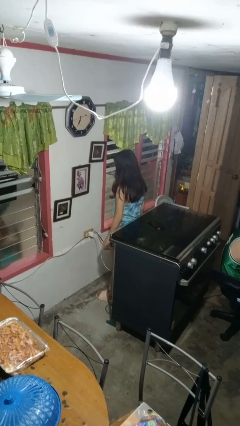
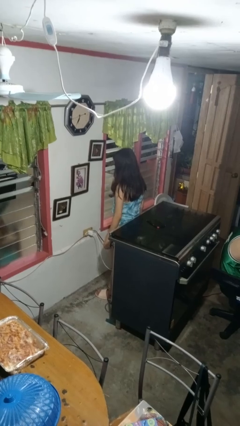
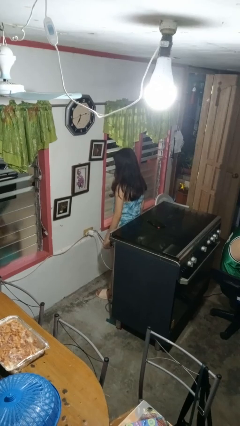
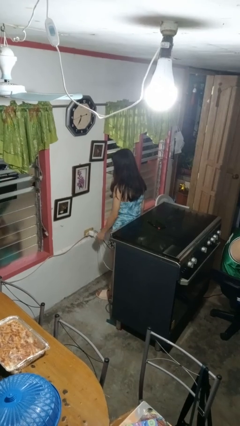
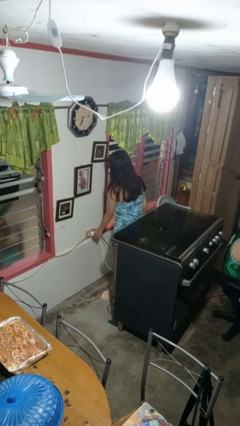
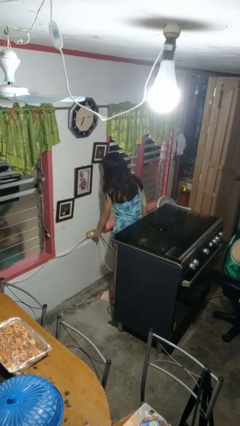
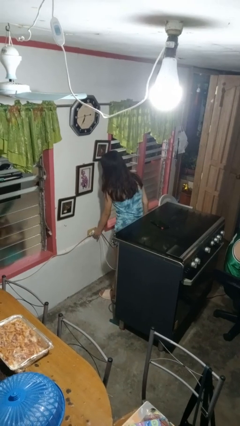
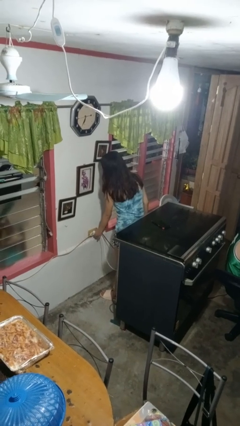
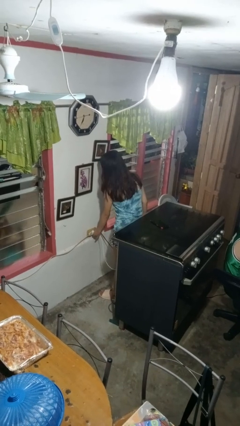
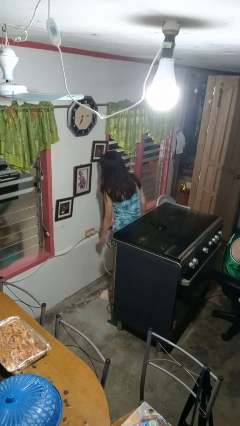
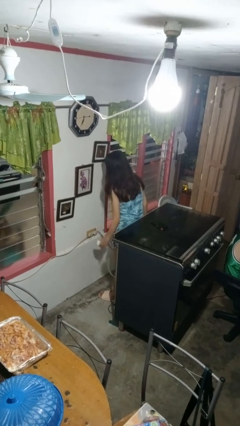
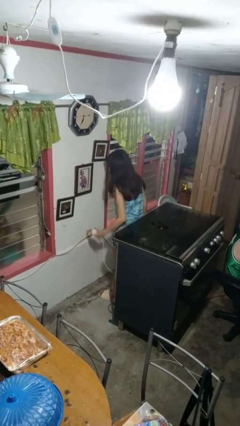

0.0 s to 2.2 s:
person unplugs from electrical socket

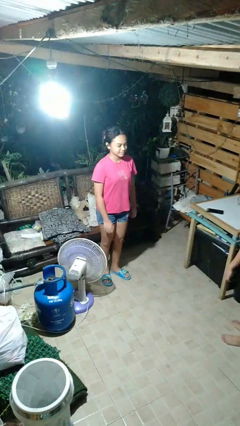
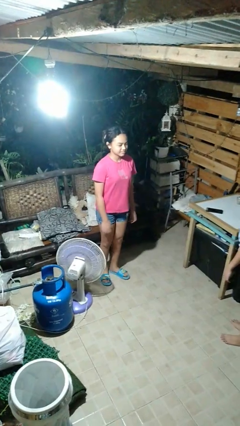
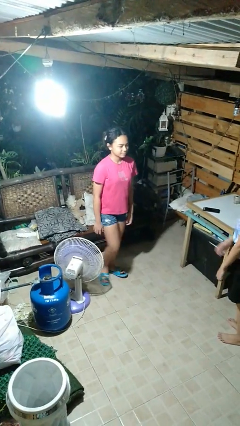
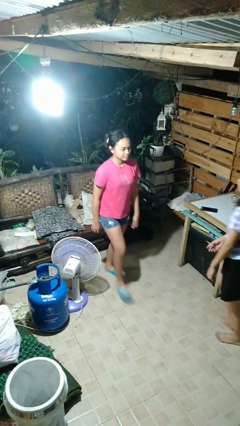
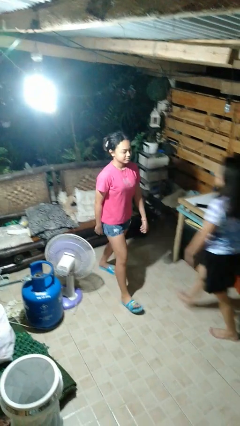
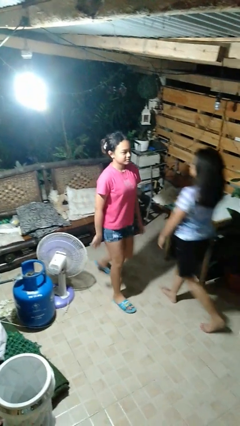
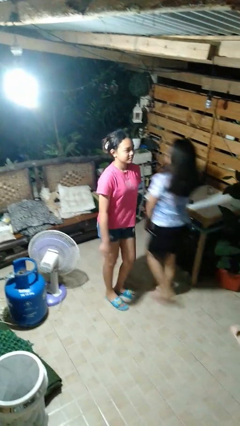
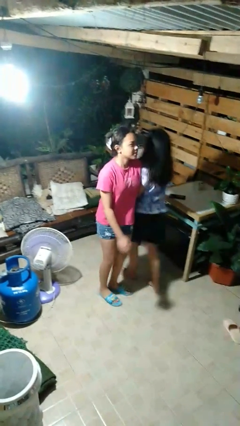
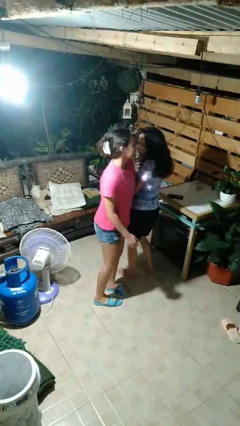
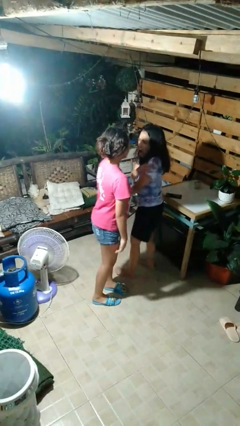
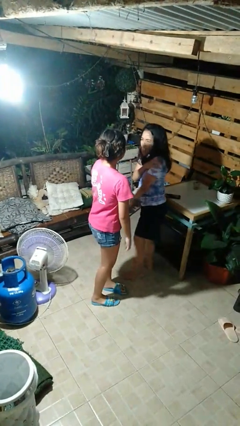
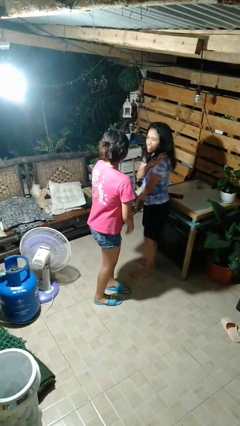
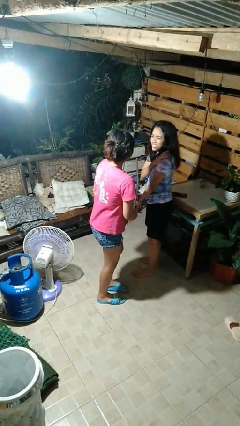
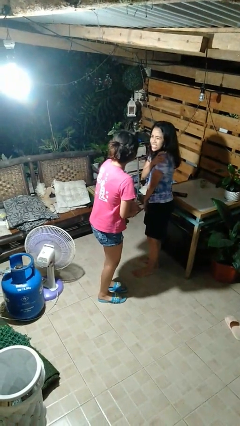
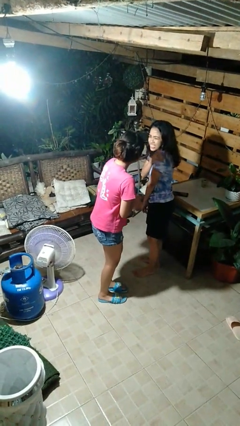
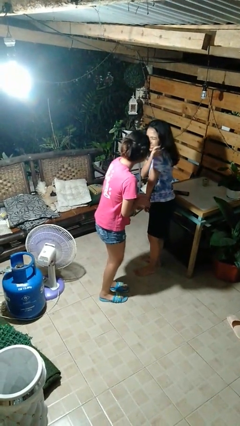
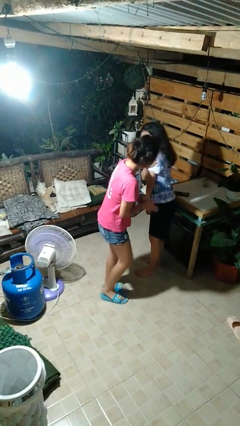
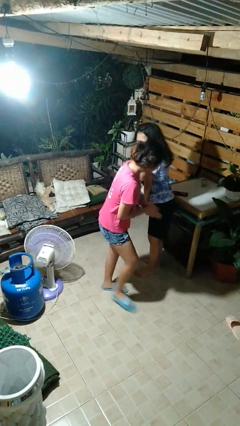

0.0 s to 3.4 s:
person bumps into person

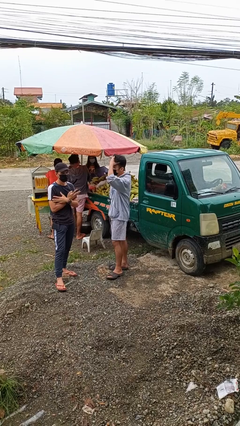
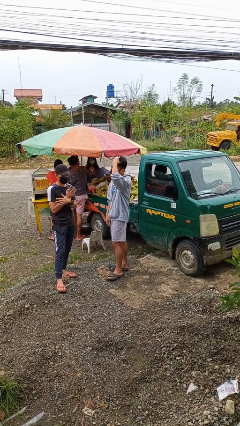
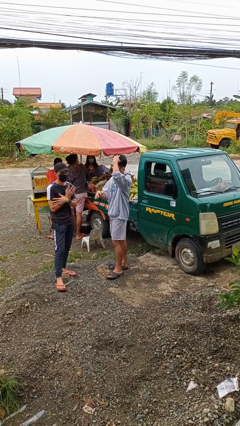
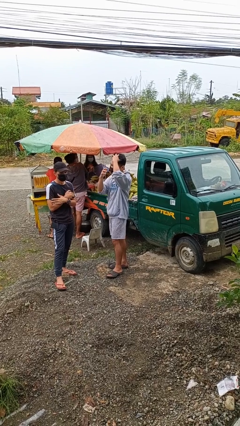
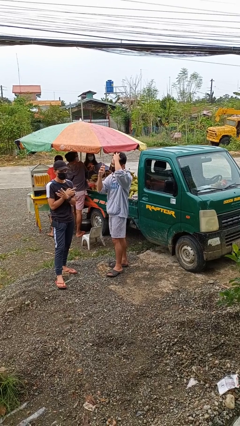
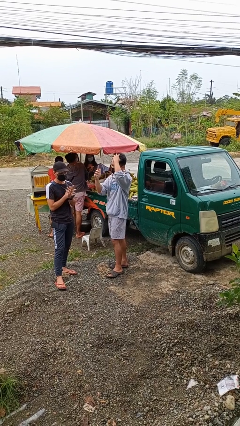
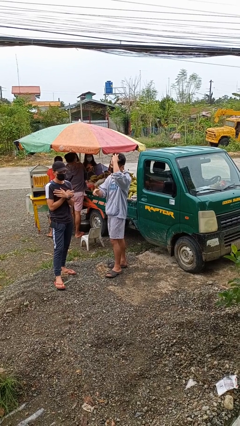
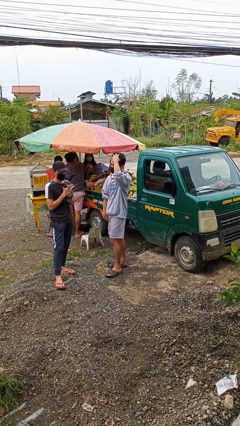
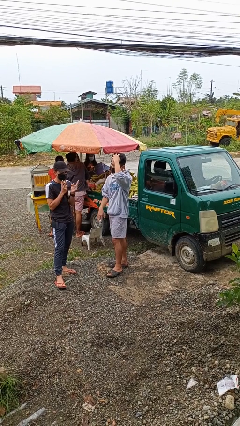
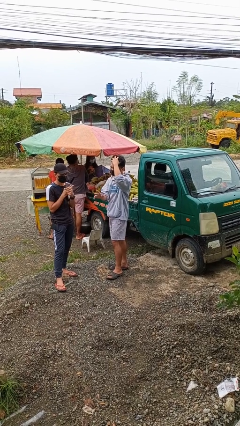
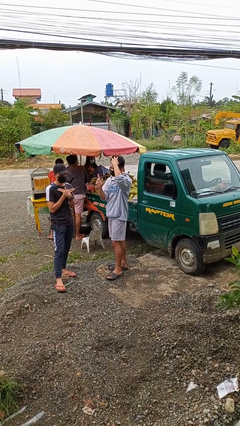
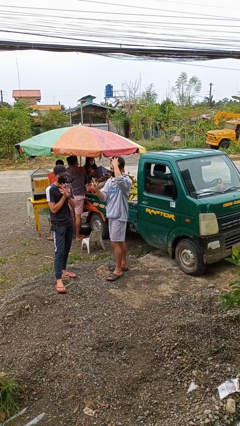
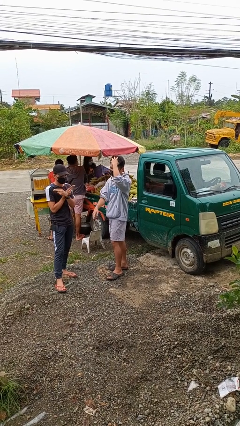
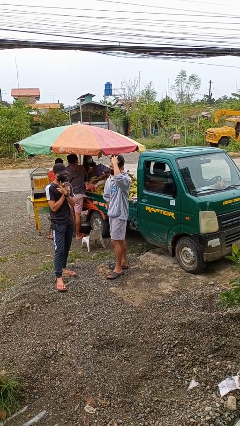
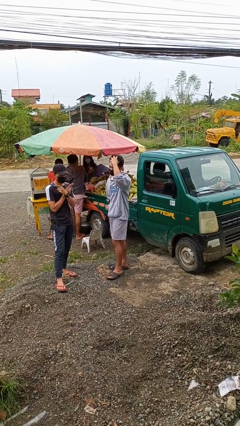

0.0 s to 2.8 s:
person talks to person

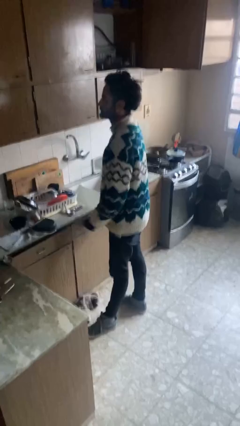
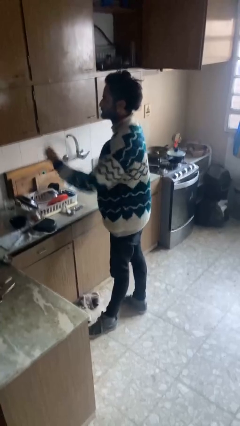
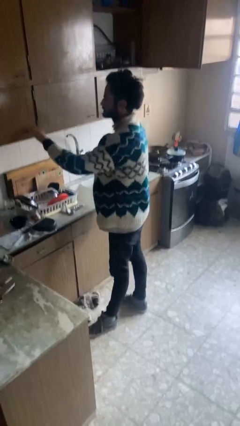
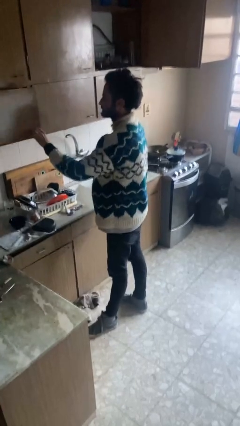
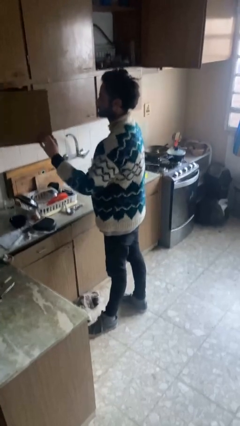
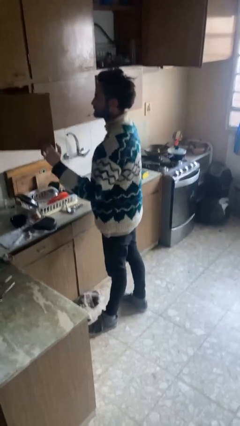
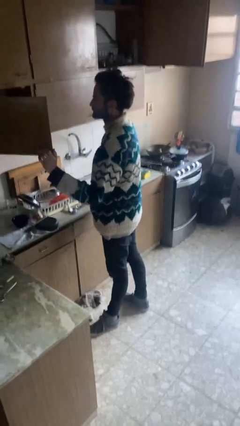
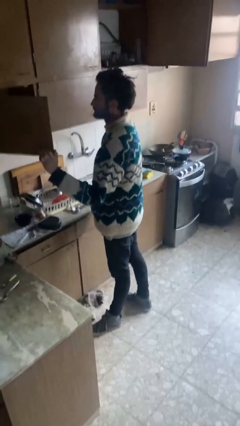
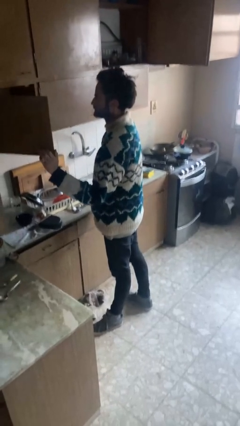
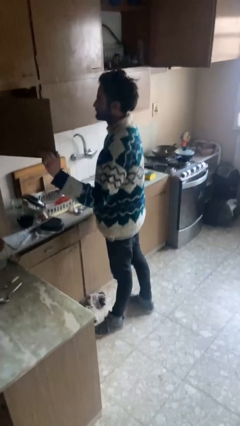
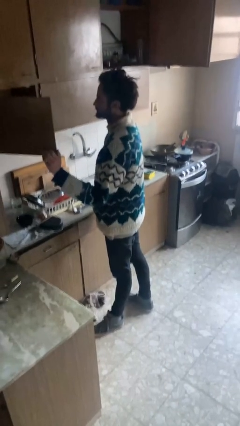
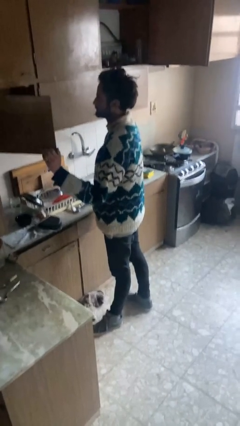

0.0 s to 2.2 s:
person opens cabinet

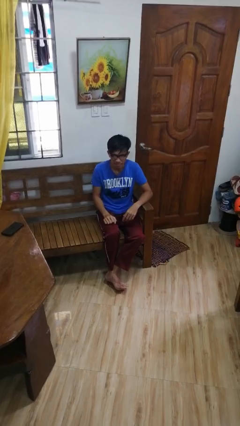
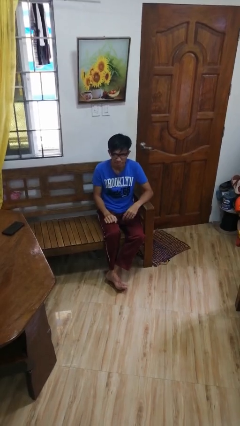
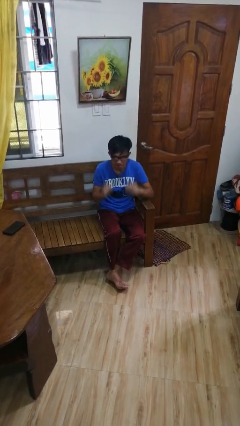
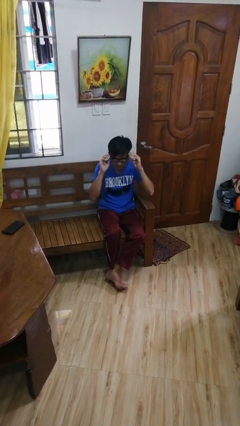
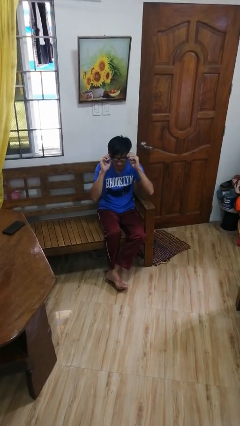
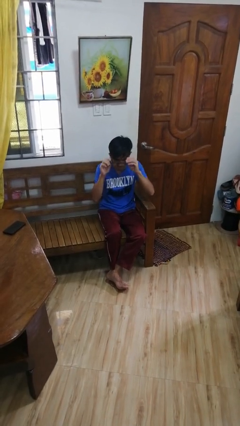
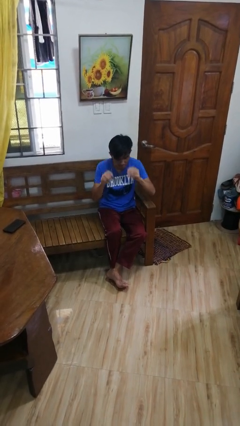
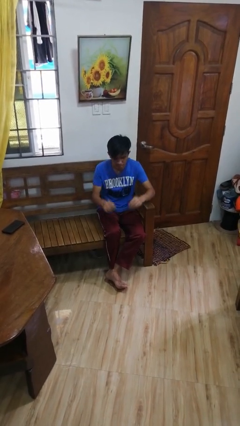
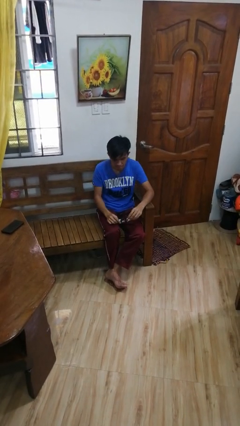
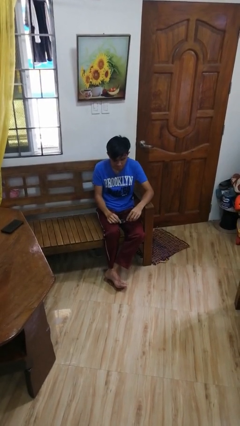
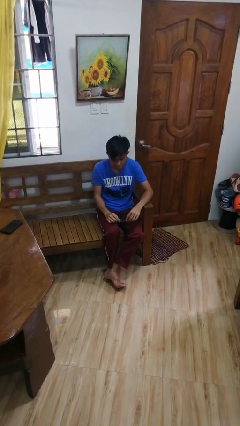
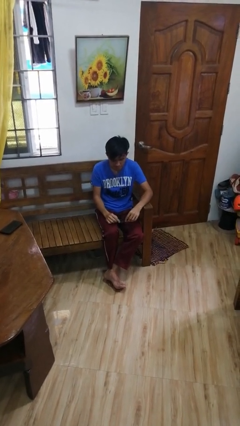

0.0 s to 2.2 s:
person takes off glasses

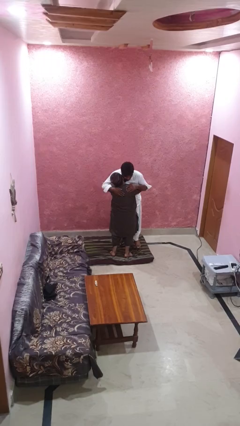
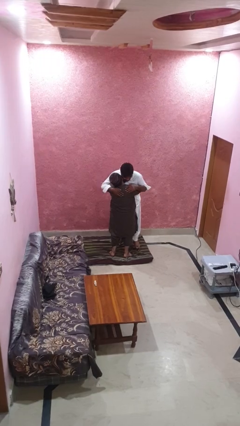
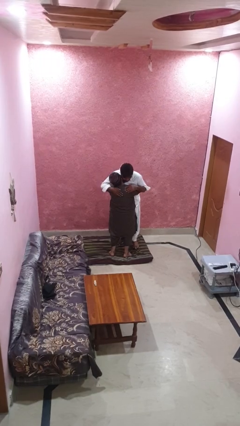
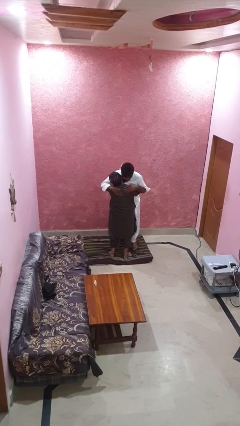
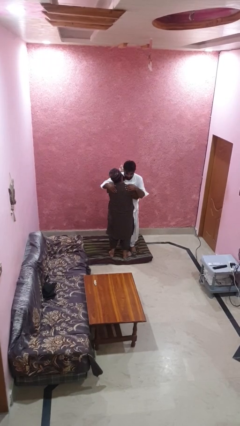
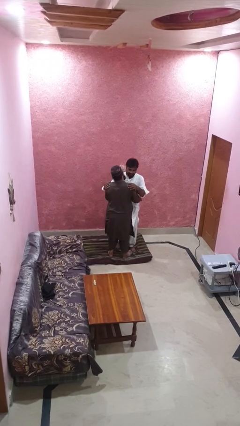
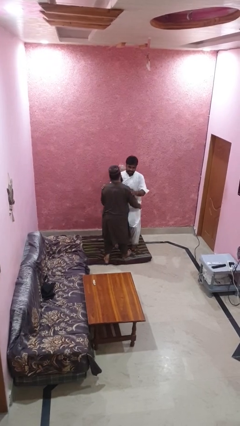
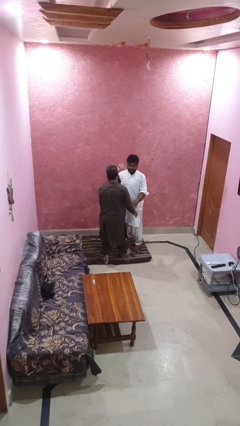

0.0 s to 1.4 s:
person puts down person

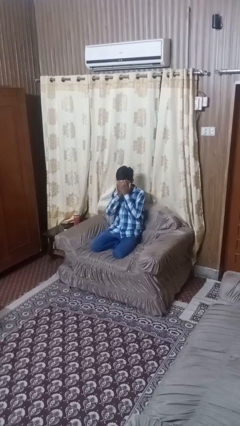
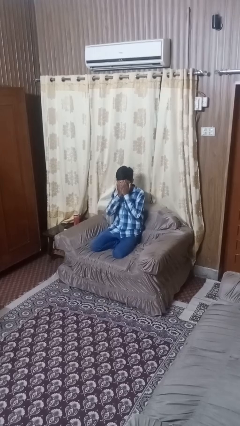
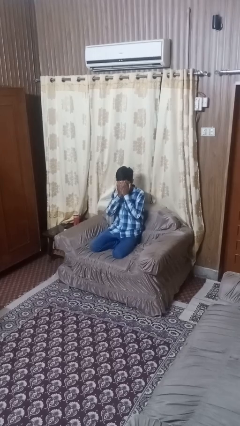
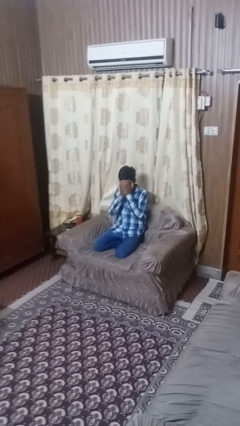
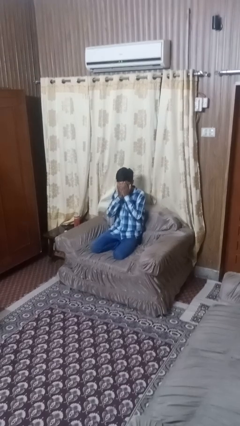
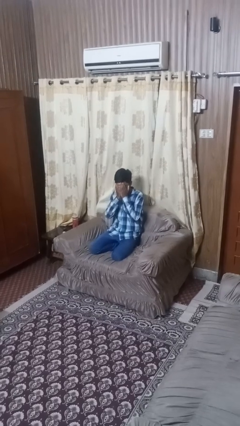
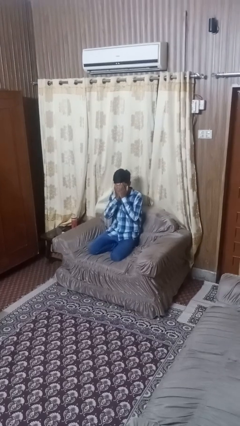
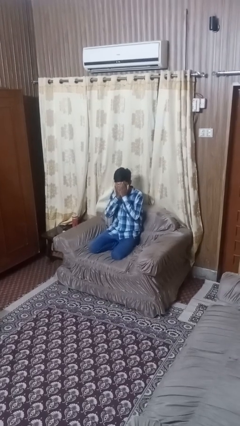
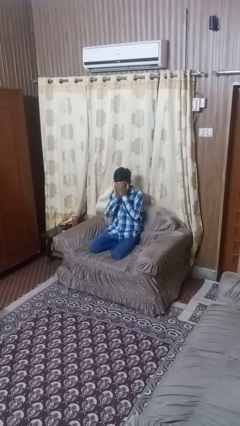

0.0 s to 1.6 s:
person covers face with hands

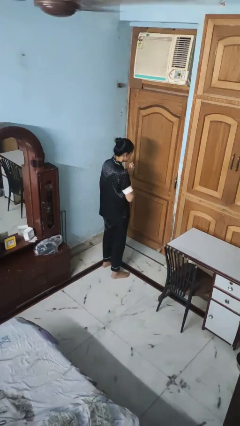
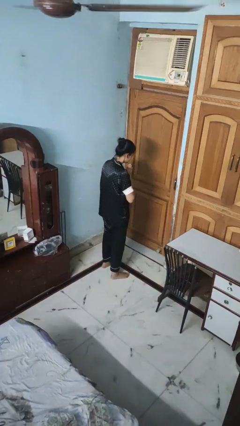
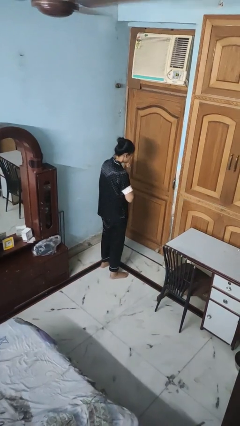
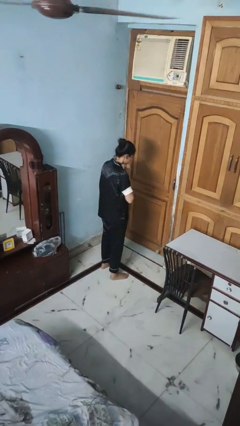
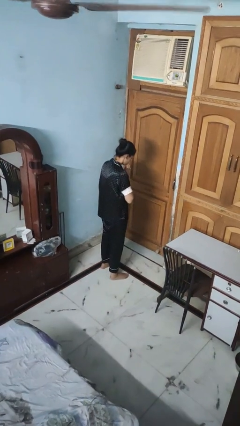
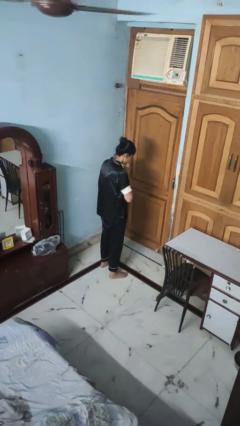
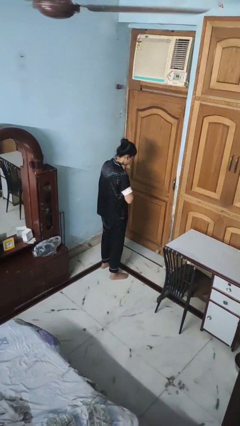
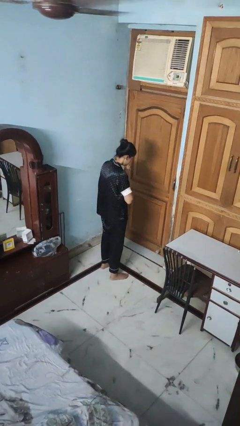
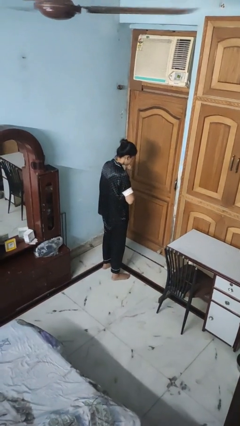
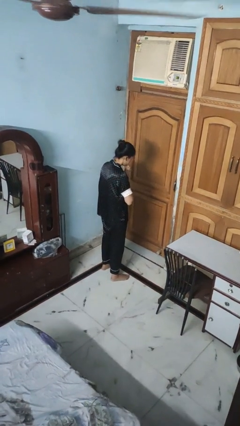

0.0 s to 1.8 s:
person prays
